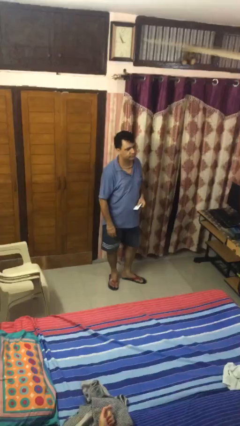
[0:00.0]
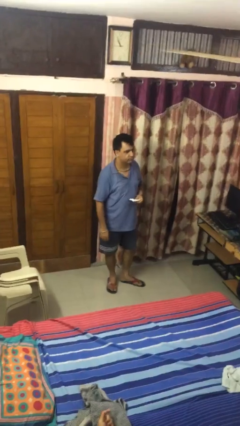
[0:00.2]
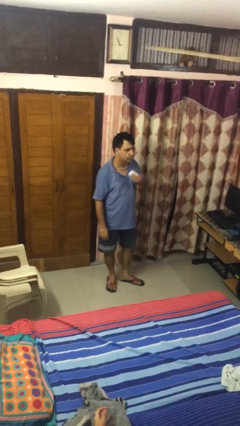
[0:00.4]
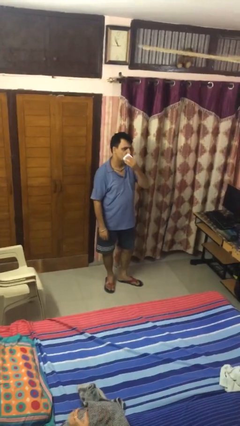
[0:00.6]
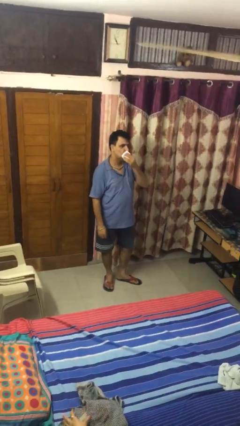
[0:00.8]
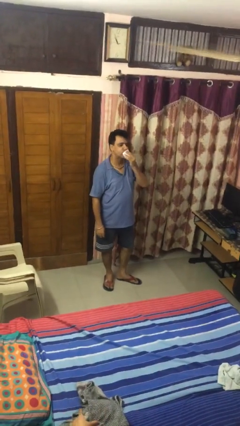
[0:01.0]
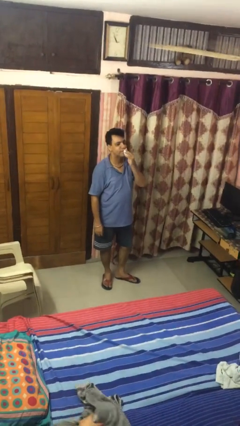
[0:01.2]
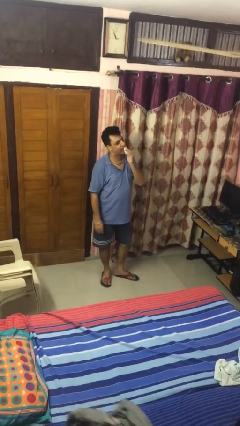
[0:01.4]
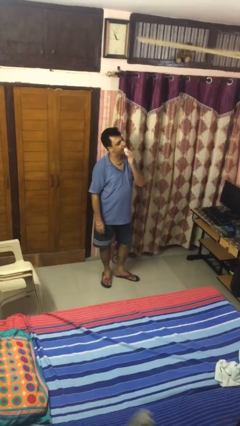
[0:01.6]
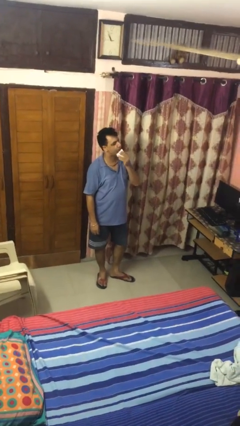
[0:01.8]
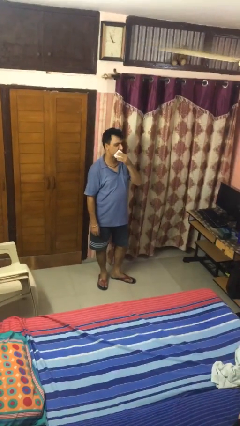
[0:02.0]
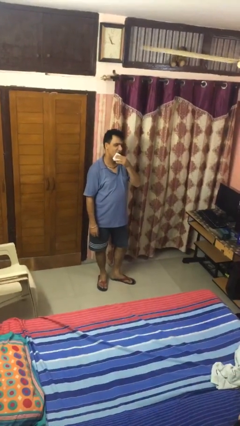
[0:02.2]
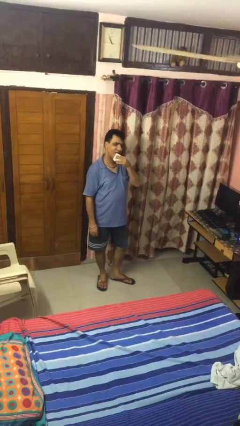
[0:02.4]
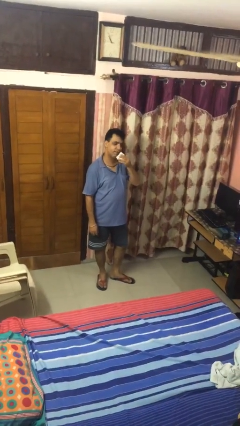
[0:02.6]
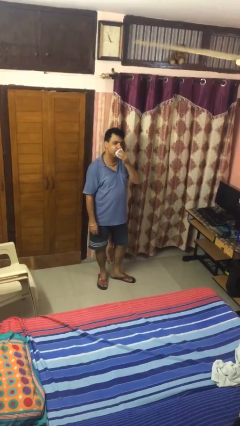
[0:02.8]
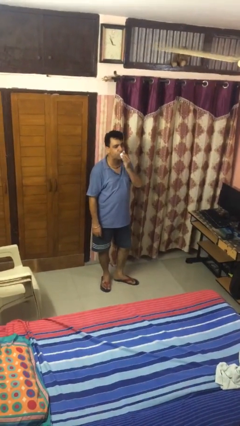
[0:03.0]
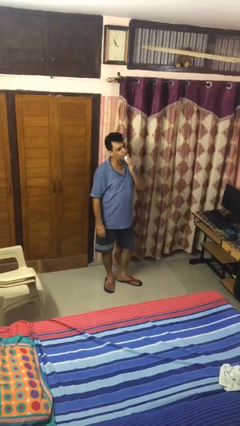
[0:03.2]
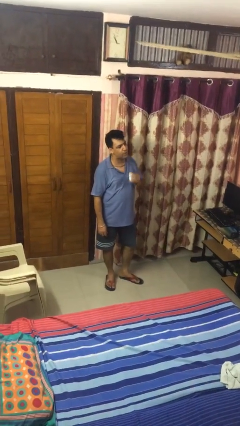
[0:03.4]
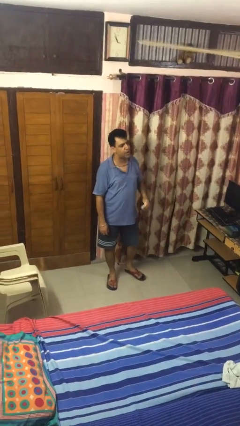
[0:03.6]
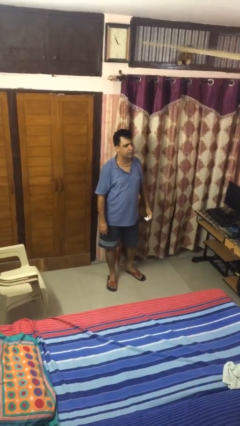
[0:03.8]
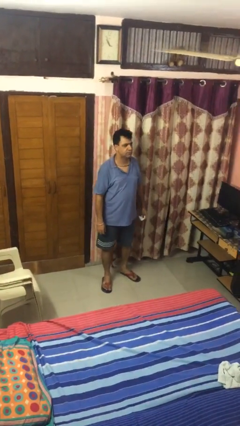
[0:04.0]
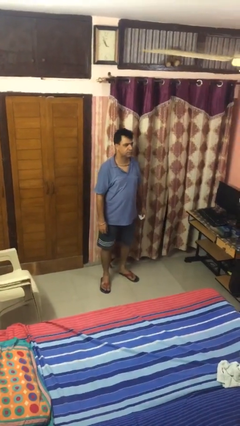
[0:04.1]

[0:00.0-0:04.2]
person wipes mouth with napkin

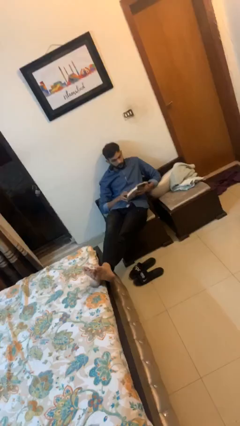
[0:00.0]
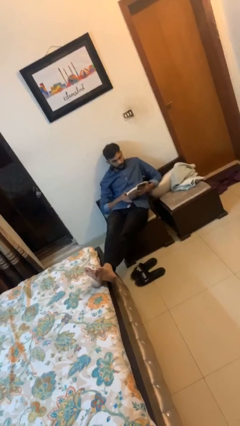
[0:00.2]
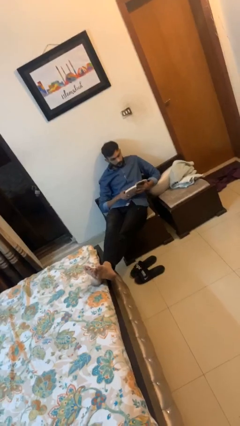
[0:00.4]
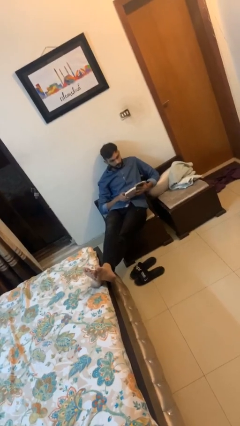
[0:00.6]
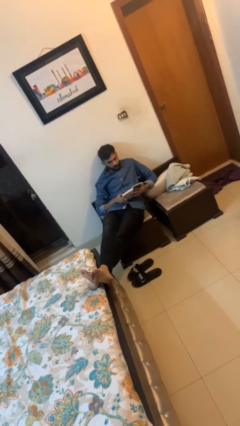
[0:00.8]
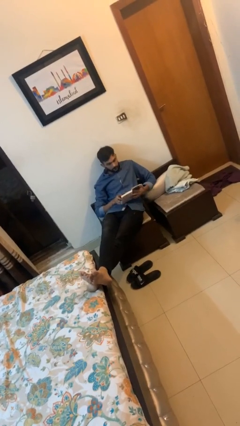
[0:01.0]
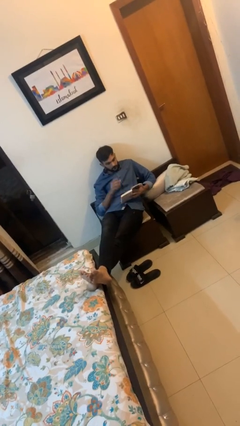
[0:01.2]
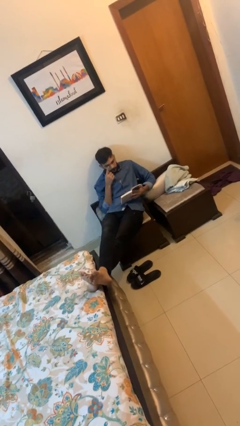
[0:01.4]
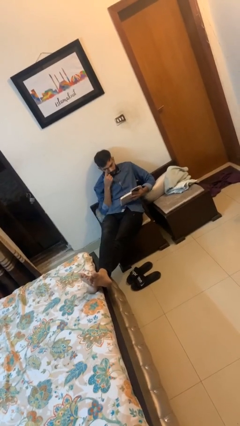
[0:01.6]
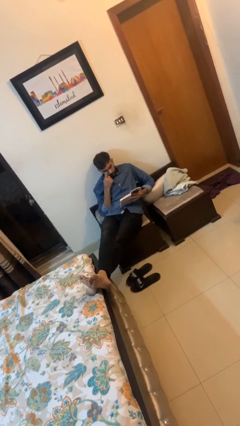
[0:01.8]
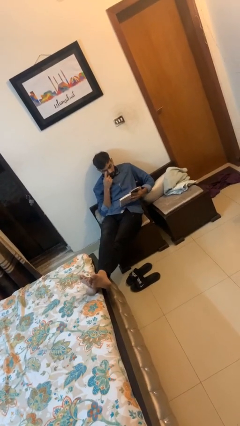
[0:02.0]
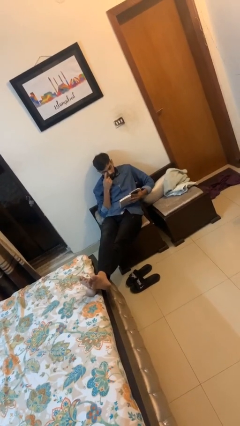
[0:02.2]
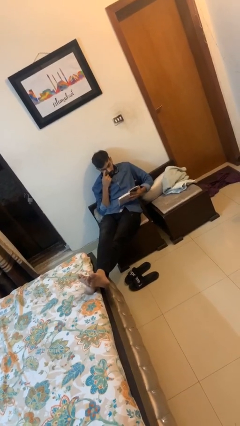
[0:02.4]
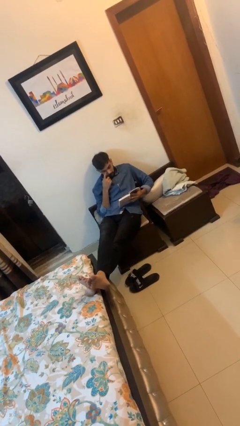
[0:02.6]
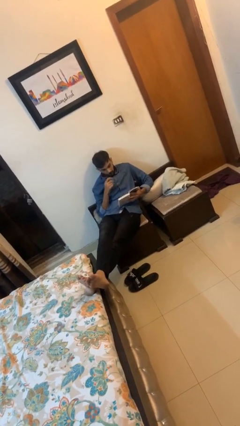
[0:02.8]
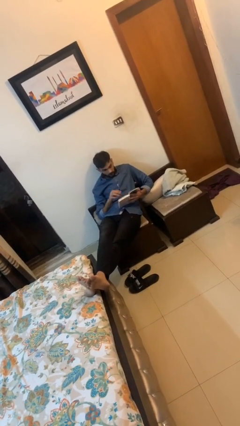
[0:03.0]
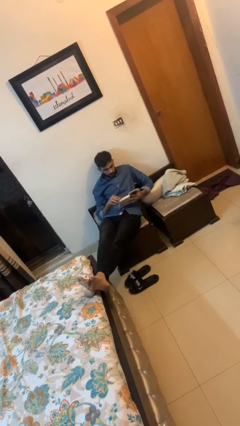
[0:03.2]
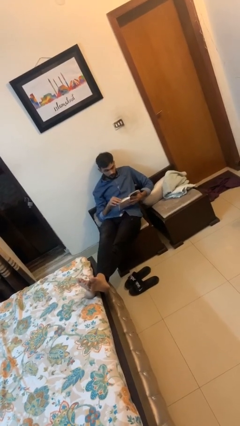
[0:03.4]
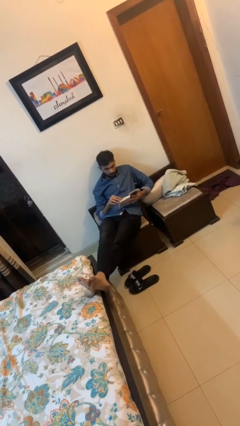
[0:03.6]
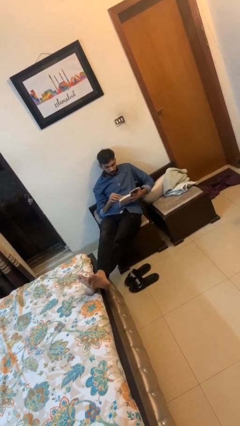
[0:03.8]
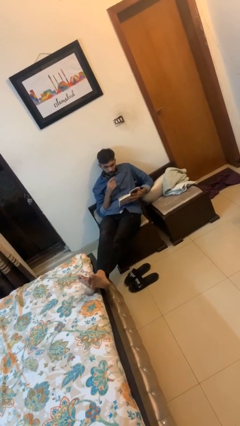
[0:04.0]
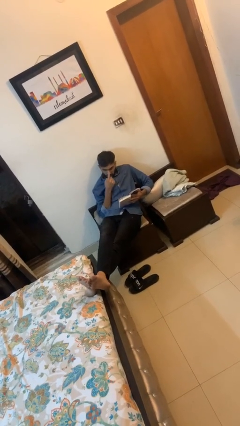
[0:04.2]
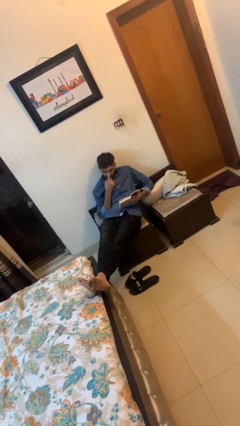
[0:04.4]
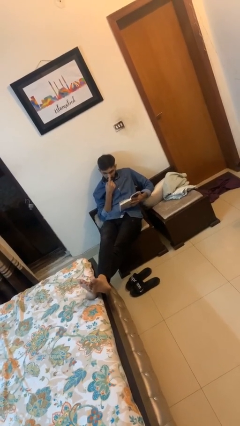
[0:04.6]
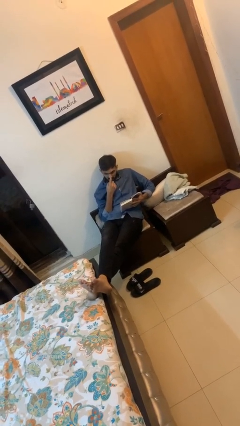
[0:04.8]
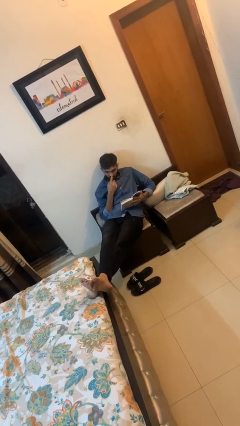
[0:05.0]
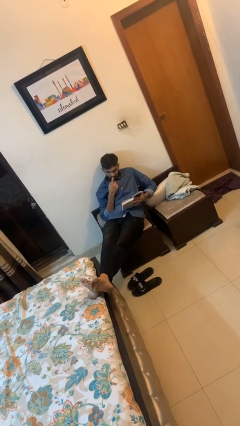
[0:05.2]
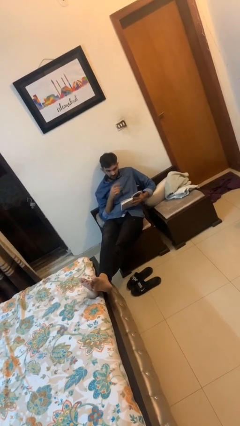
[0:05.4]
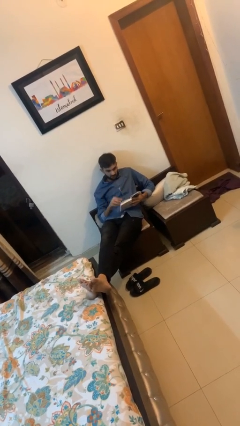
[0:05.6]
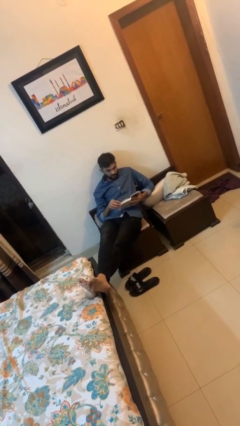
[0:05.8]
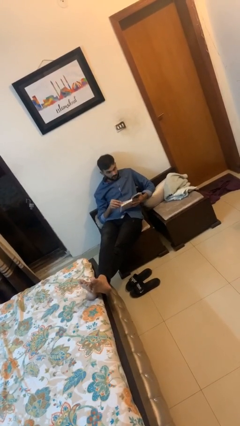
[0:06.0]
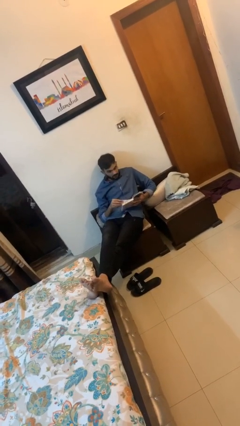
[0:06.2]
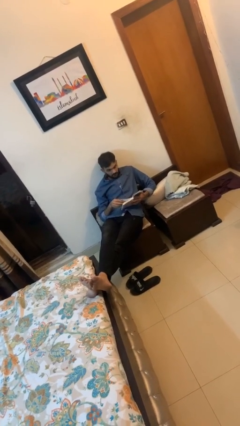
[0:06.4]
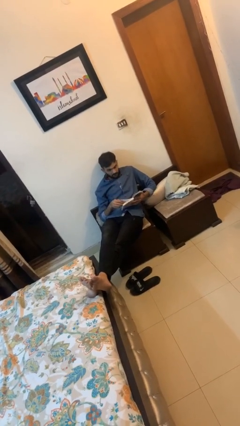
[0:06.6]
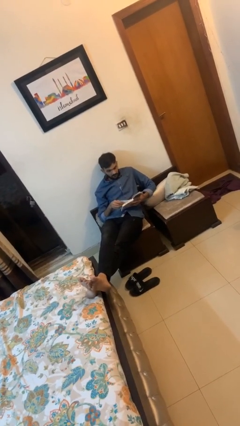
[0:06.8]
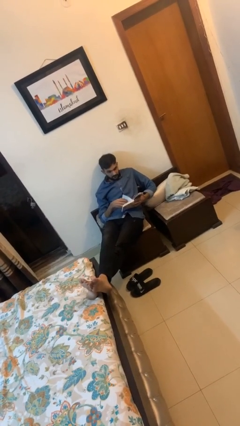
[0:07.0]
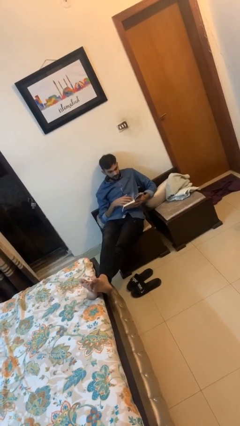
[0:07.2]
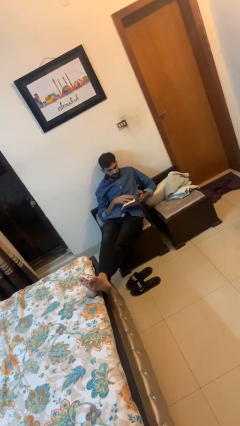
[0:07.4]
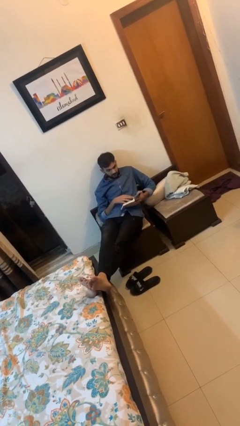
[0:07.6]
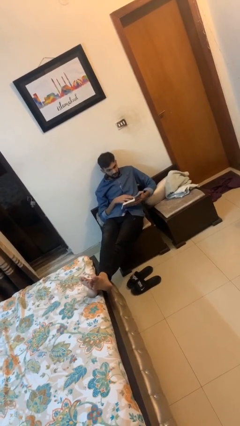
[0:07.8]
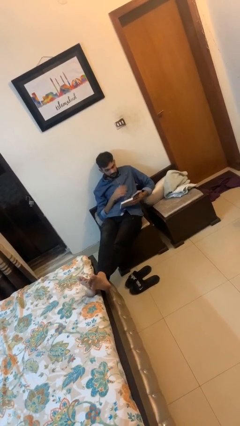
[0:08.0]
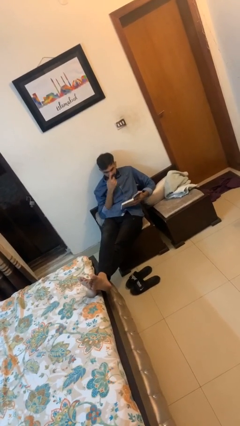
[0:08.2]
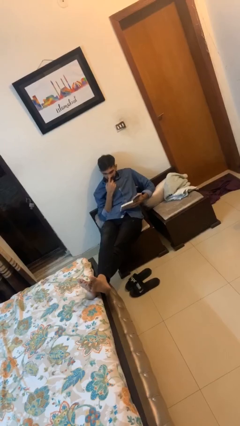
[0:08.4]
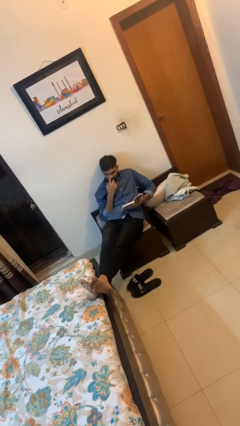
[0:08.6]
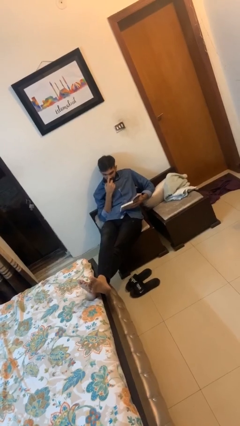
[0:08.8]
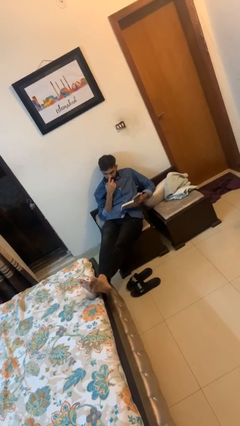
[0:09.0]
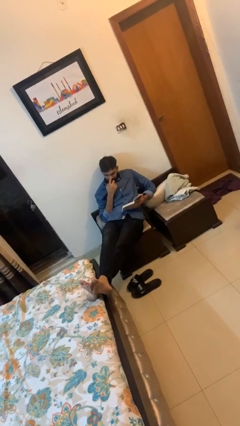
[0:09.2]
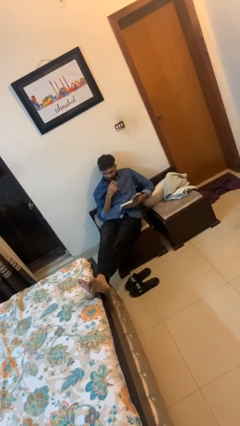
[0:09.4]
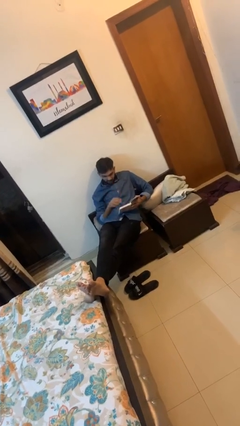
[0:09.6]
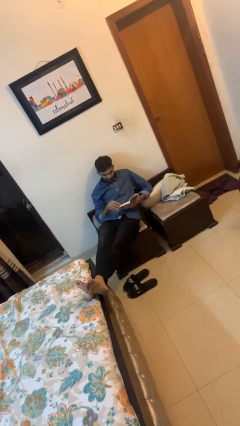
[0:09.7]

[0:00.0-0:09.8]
person reads document

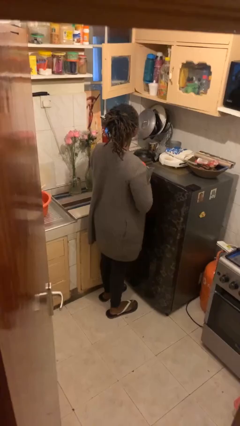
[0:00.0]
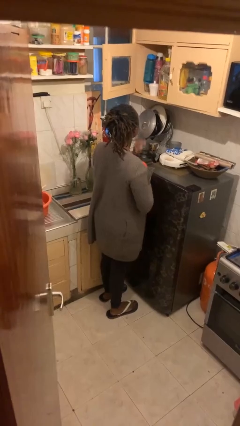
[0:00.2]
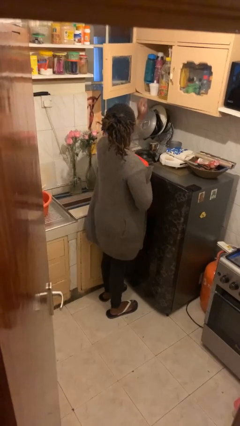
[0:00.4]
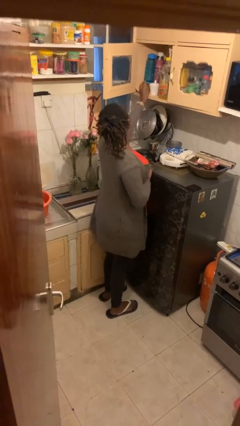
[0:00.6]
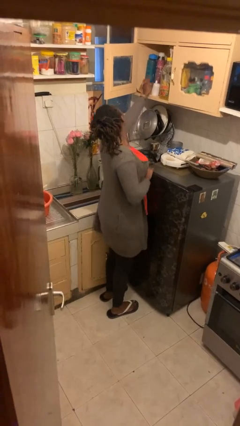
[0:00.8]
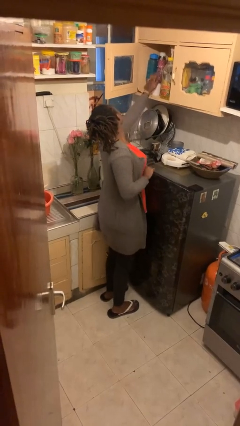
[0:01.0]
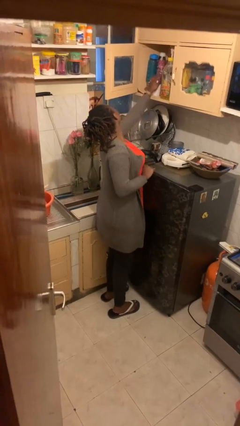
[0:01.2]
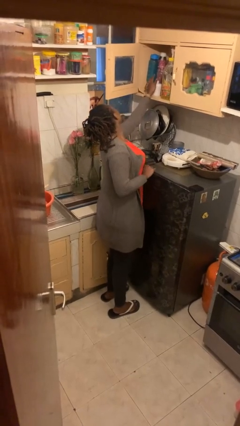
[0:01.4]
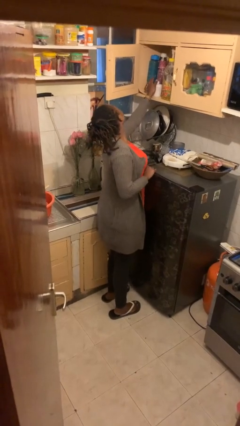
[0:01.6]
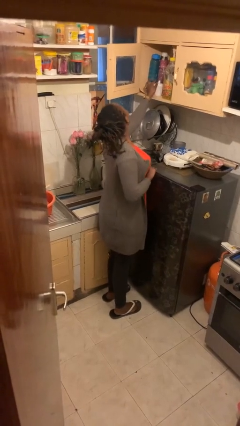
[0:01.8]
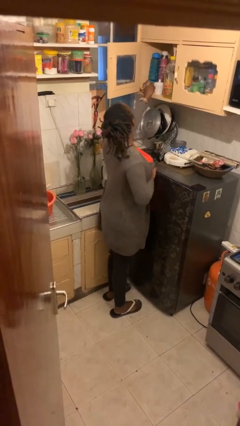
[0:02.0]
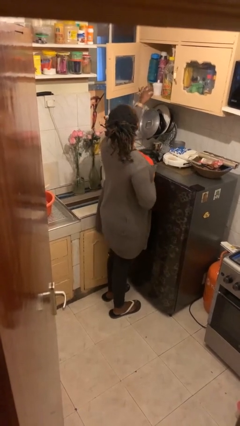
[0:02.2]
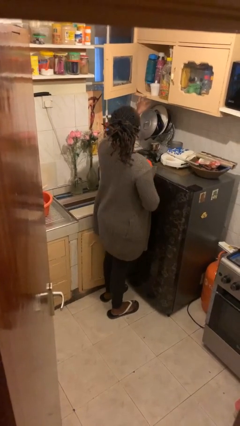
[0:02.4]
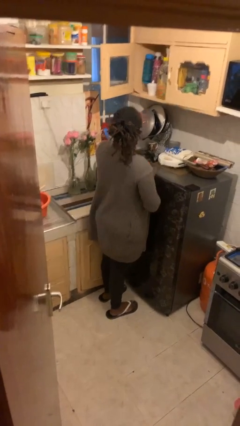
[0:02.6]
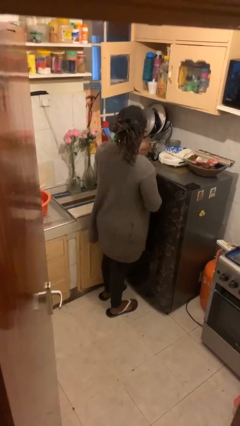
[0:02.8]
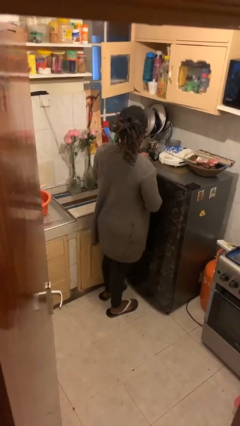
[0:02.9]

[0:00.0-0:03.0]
person searches in cabinet

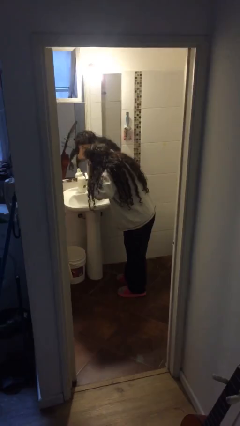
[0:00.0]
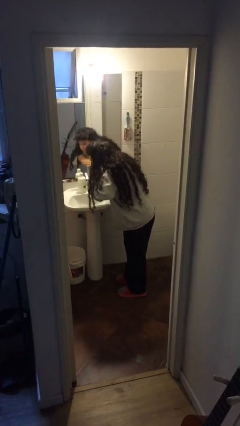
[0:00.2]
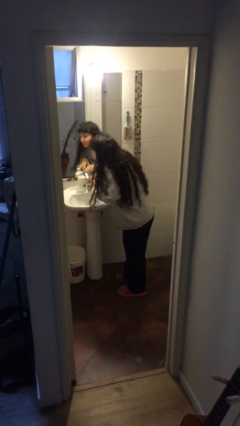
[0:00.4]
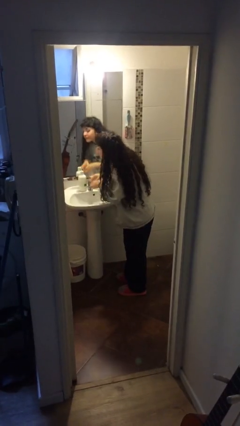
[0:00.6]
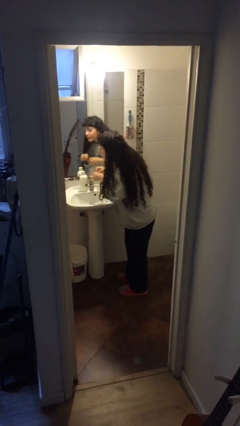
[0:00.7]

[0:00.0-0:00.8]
person washes face

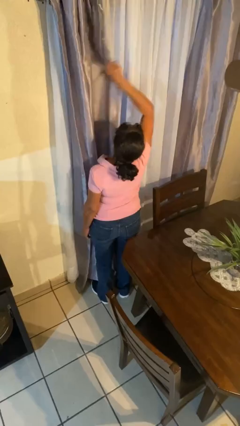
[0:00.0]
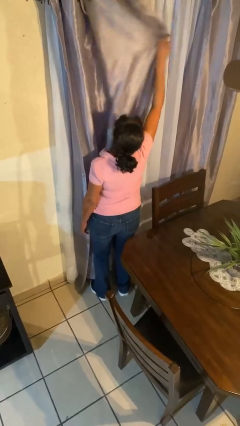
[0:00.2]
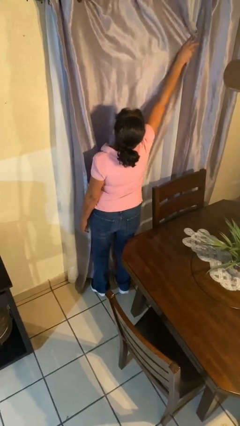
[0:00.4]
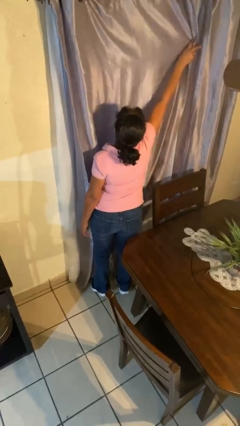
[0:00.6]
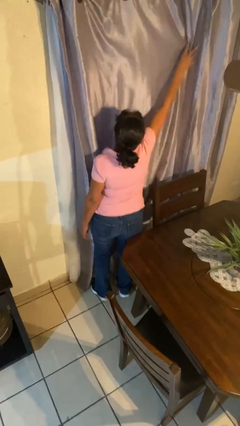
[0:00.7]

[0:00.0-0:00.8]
person closes curtains
